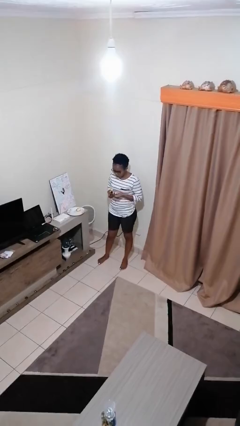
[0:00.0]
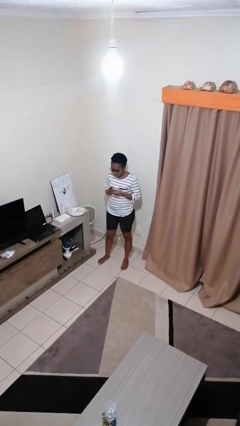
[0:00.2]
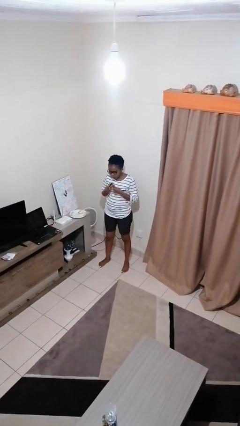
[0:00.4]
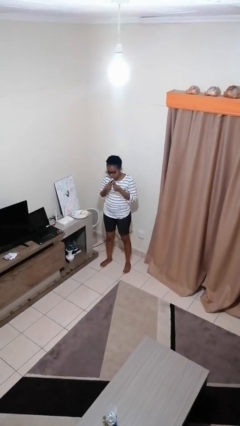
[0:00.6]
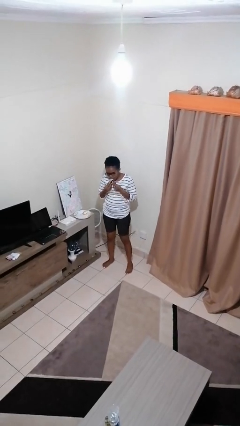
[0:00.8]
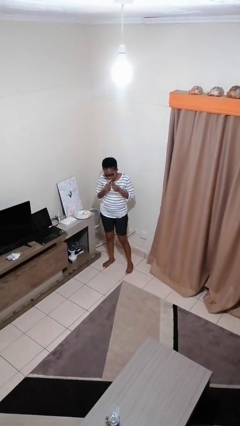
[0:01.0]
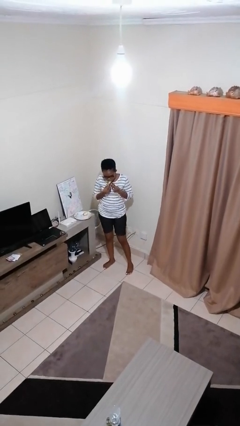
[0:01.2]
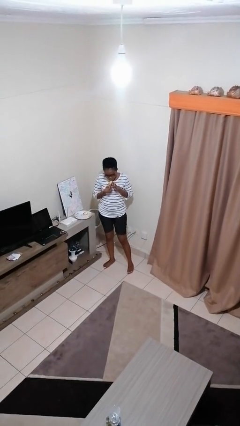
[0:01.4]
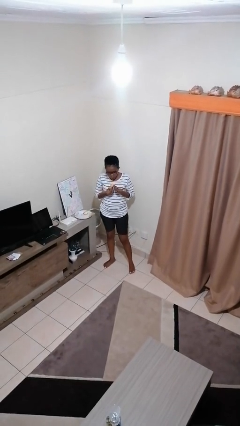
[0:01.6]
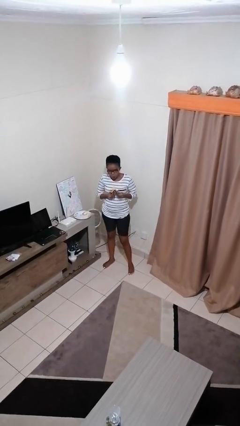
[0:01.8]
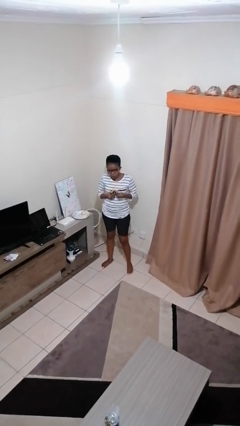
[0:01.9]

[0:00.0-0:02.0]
person eats banana

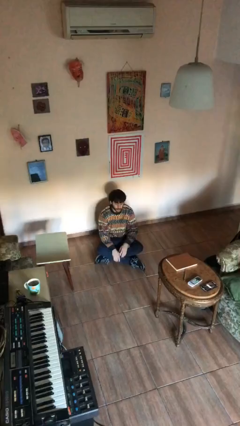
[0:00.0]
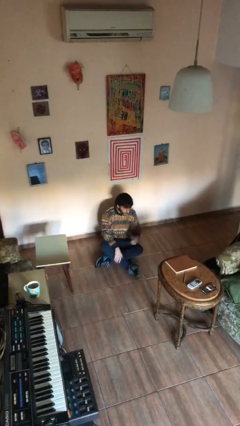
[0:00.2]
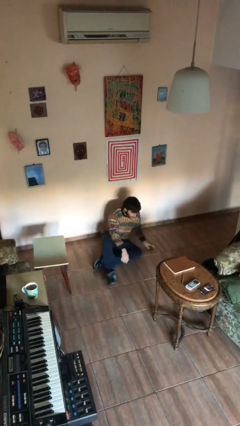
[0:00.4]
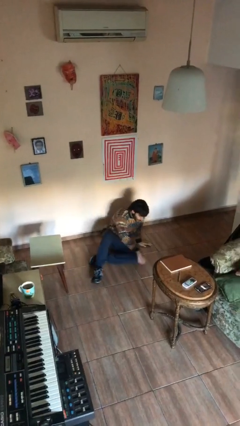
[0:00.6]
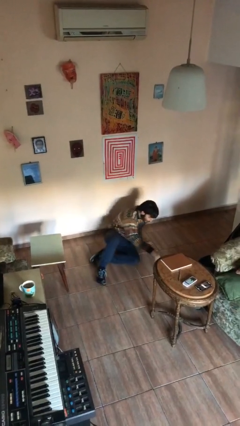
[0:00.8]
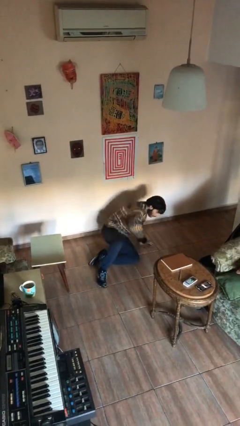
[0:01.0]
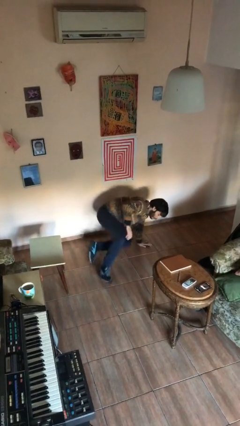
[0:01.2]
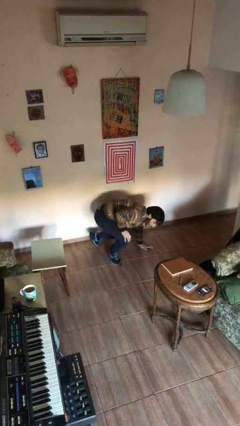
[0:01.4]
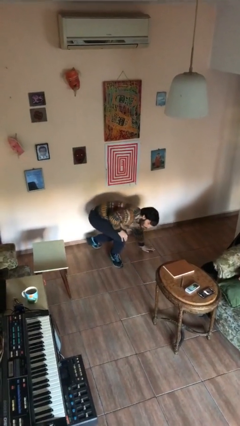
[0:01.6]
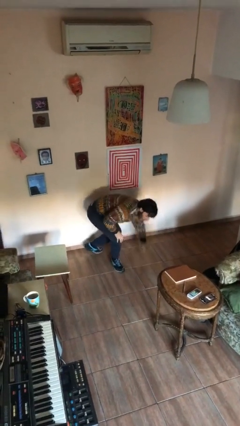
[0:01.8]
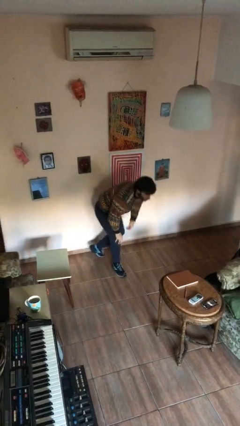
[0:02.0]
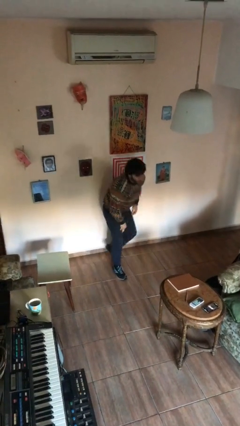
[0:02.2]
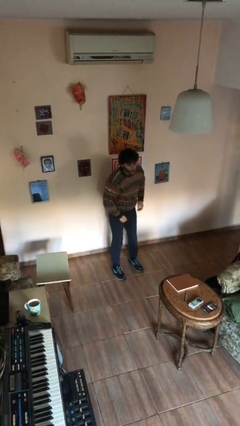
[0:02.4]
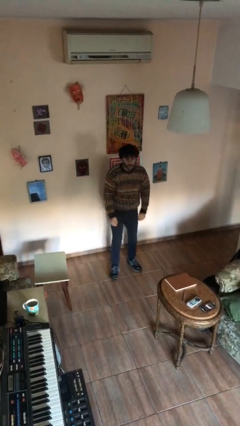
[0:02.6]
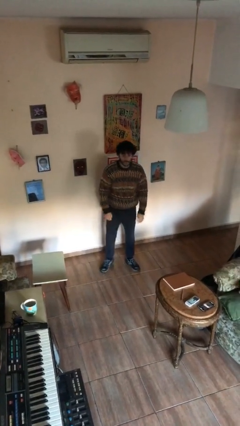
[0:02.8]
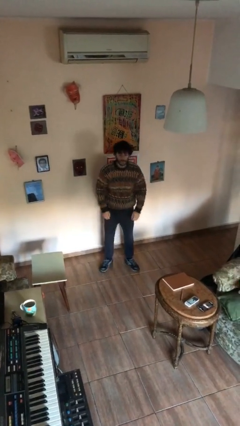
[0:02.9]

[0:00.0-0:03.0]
person stands up from floor

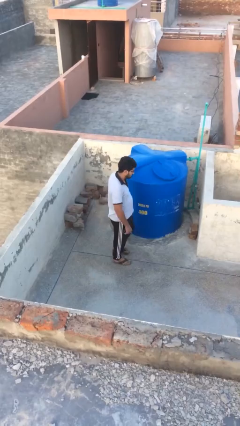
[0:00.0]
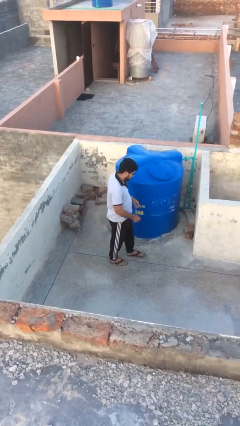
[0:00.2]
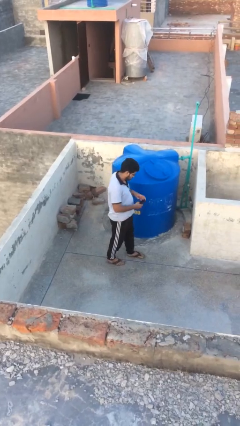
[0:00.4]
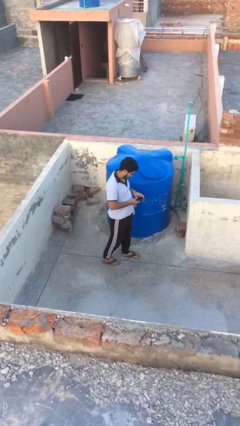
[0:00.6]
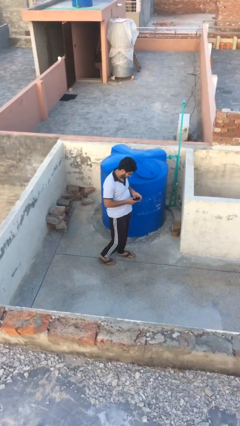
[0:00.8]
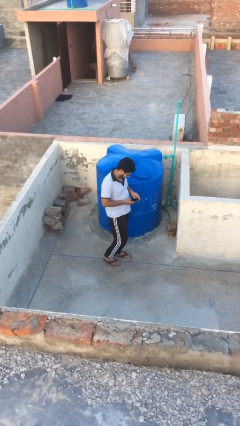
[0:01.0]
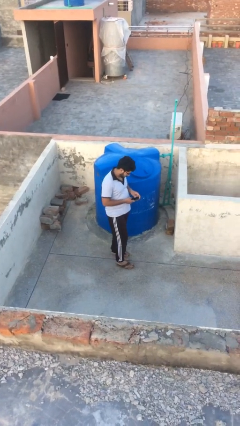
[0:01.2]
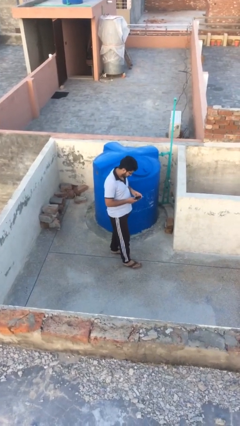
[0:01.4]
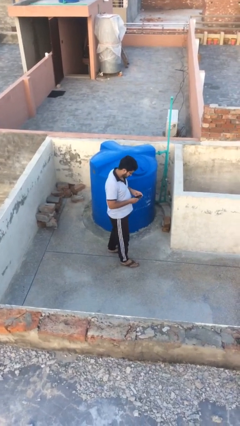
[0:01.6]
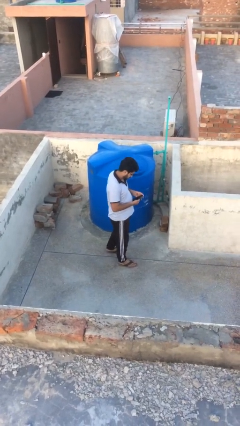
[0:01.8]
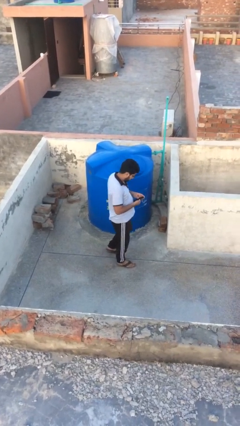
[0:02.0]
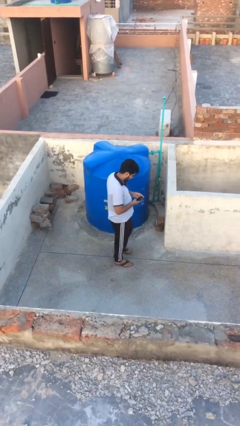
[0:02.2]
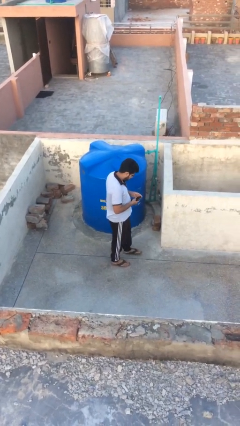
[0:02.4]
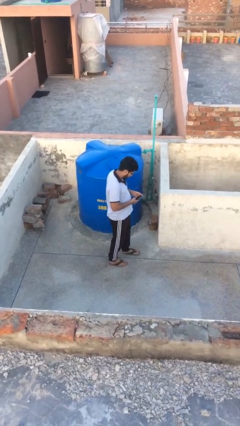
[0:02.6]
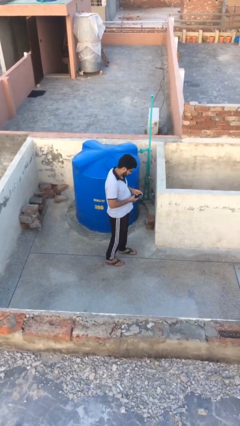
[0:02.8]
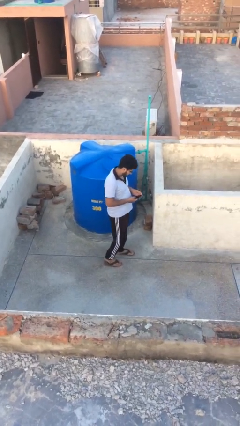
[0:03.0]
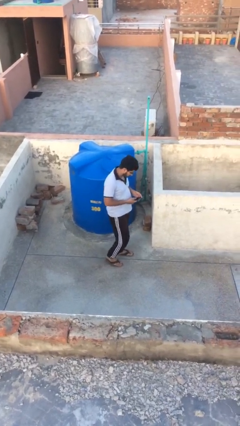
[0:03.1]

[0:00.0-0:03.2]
person texts on phone

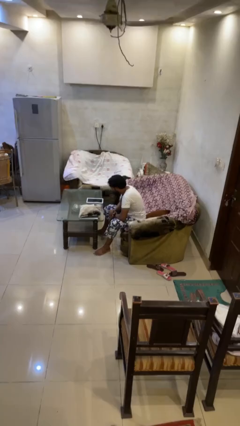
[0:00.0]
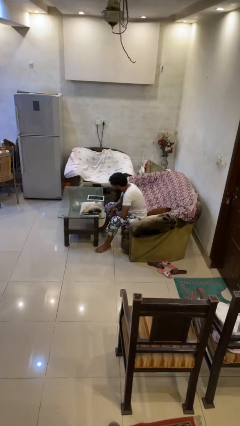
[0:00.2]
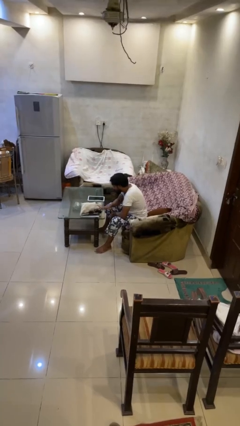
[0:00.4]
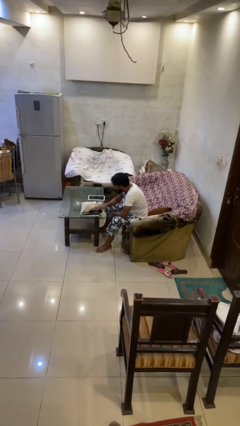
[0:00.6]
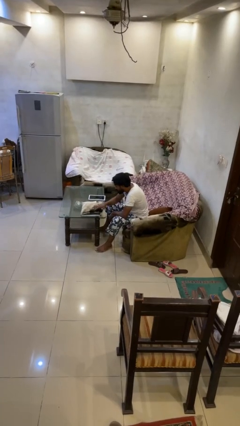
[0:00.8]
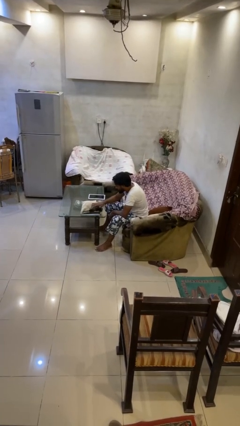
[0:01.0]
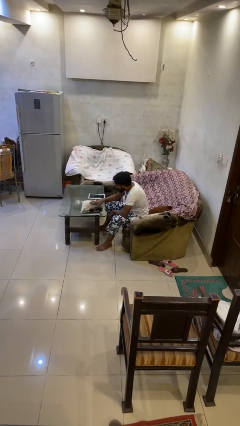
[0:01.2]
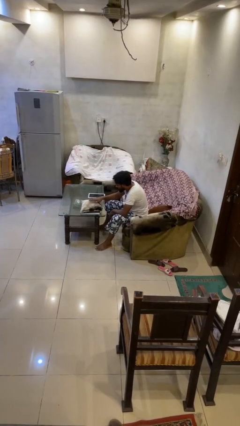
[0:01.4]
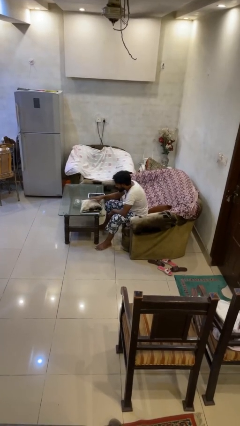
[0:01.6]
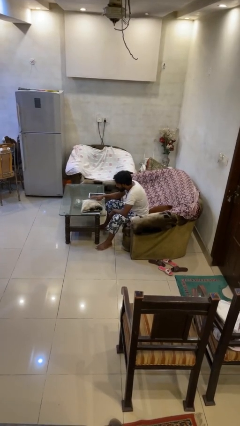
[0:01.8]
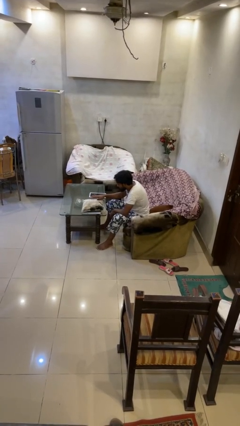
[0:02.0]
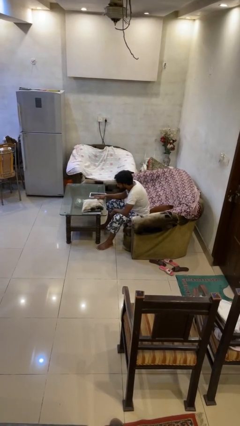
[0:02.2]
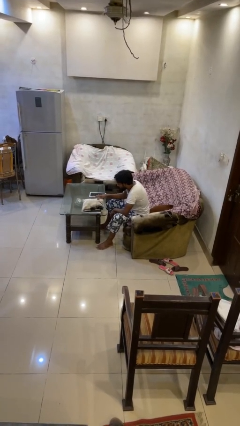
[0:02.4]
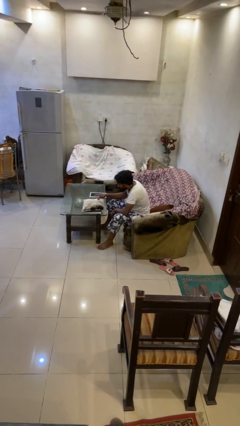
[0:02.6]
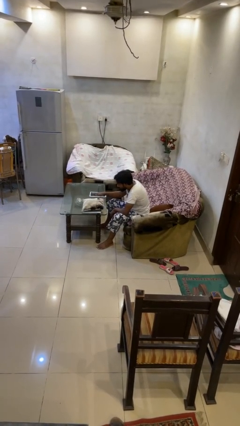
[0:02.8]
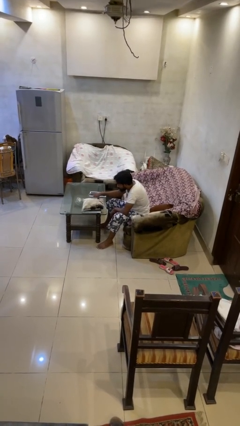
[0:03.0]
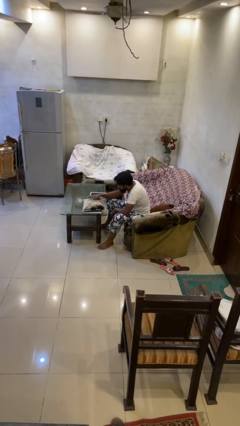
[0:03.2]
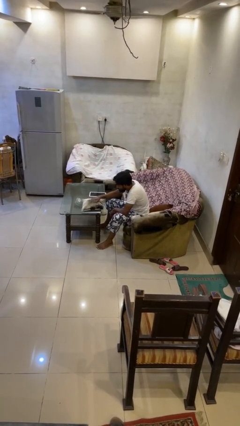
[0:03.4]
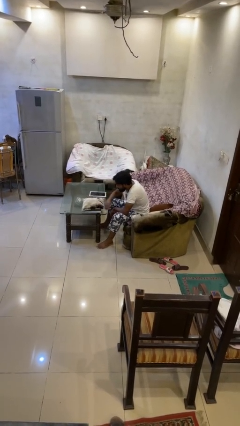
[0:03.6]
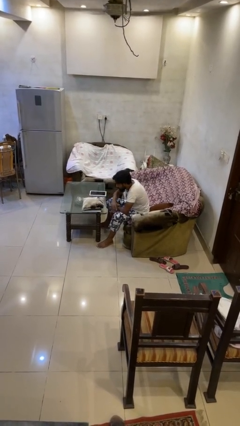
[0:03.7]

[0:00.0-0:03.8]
person waves hand over object

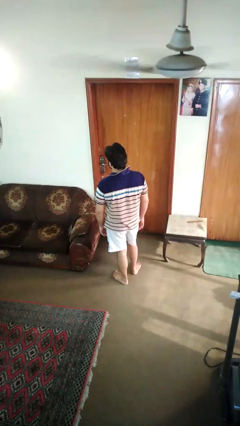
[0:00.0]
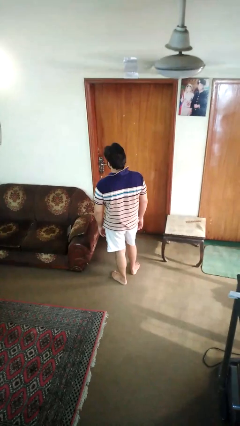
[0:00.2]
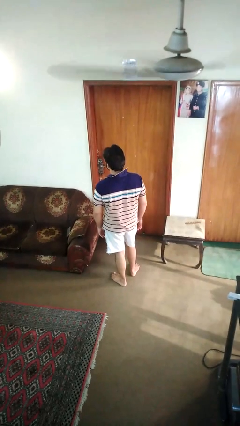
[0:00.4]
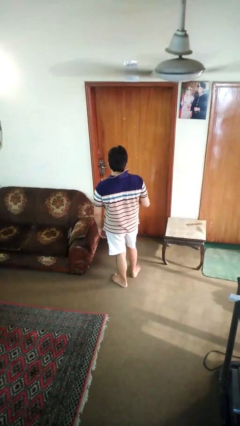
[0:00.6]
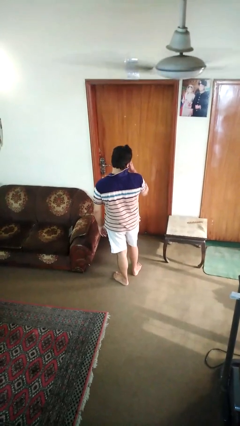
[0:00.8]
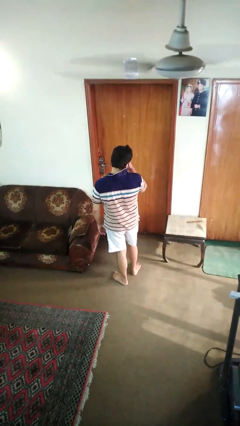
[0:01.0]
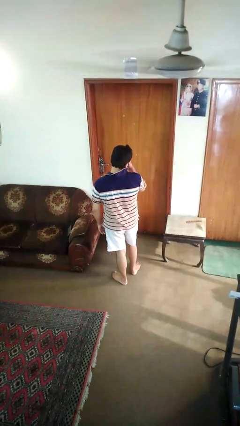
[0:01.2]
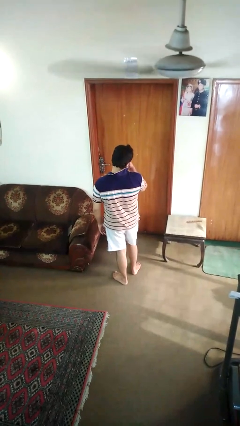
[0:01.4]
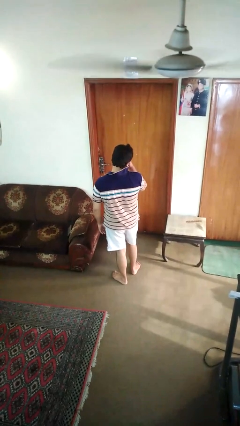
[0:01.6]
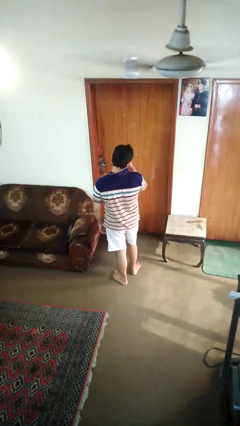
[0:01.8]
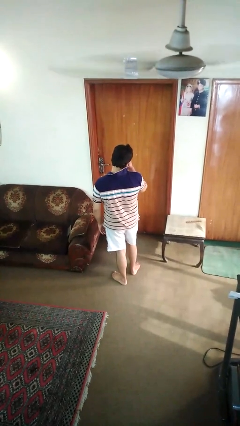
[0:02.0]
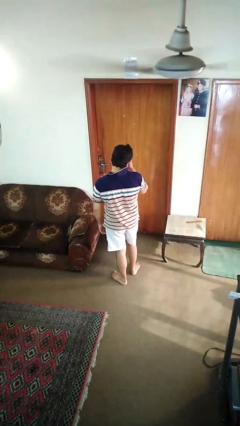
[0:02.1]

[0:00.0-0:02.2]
person rubs eyes

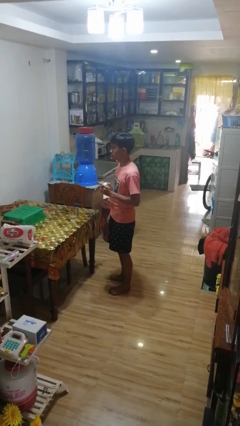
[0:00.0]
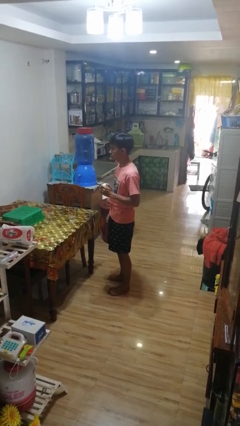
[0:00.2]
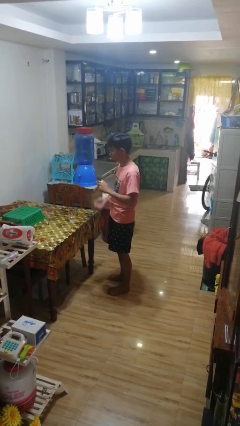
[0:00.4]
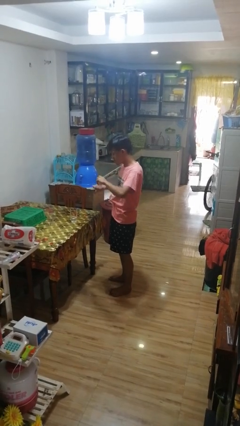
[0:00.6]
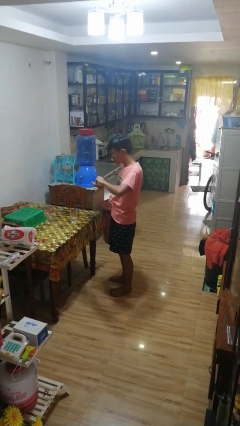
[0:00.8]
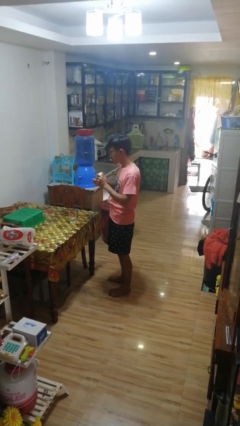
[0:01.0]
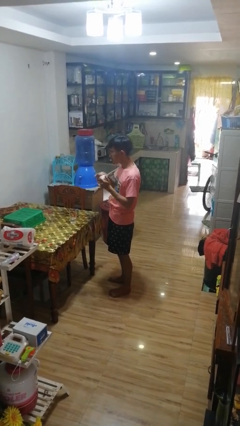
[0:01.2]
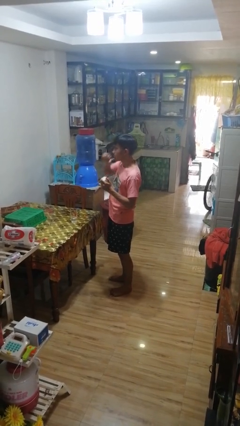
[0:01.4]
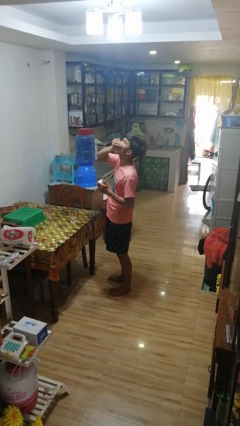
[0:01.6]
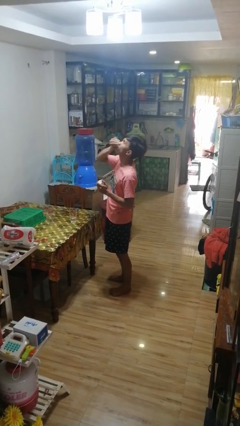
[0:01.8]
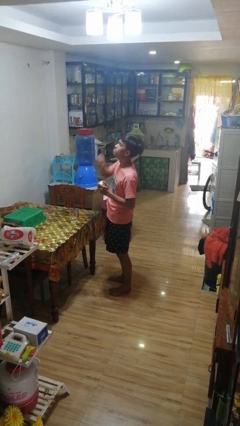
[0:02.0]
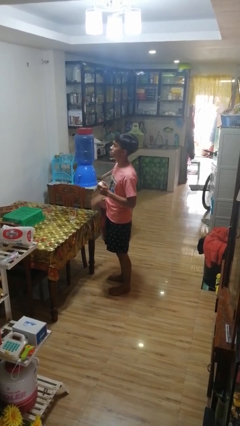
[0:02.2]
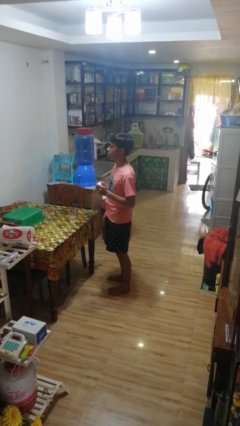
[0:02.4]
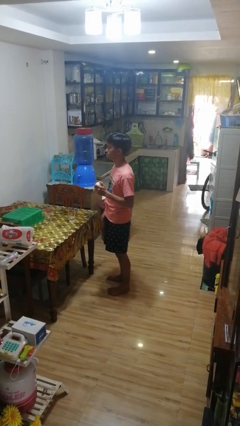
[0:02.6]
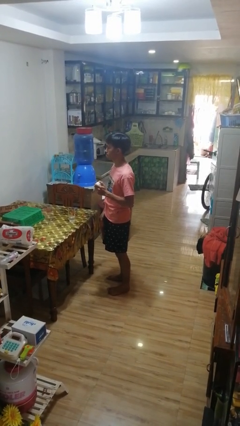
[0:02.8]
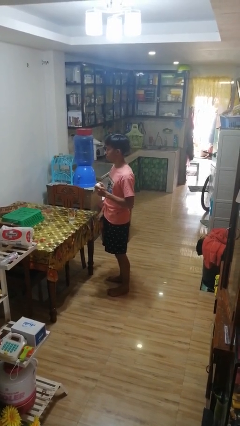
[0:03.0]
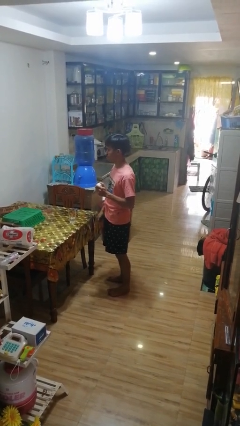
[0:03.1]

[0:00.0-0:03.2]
person takes medicine pills
